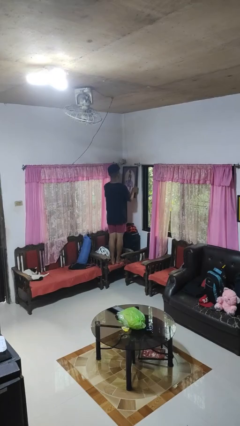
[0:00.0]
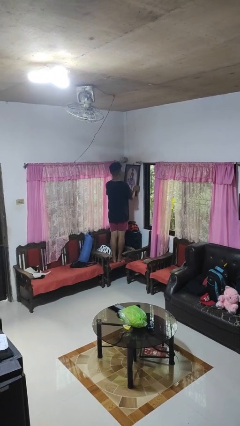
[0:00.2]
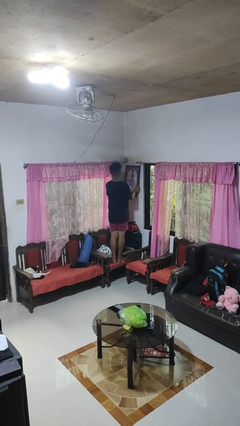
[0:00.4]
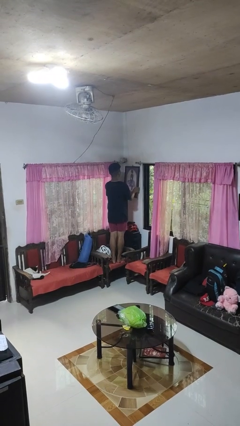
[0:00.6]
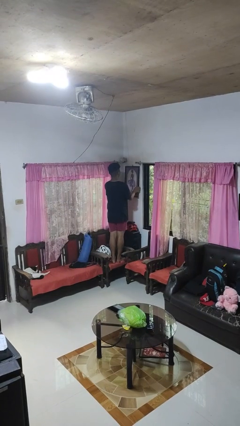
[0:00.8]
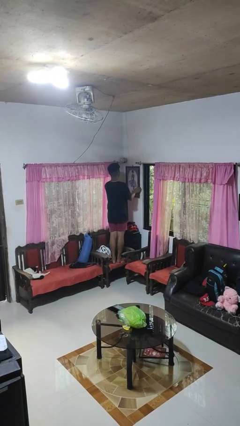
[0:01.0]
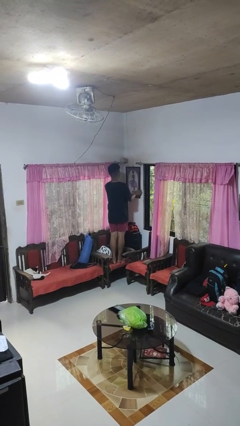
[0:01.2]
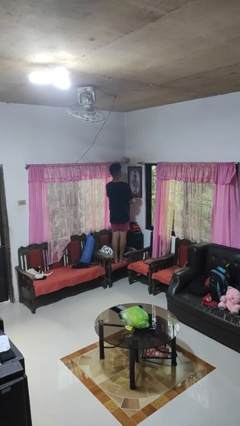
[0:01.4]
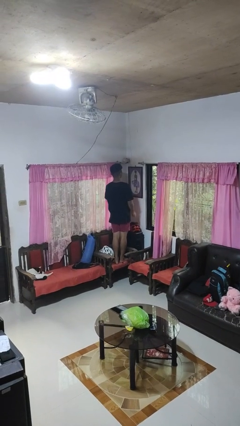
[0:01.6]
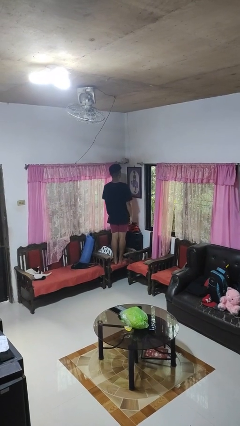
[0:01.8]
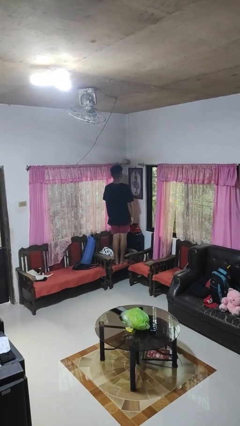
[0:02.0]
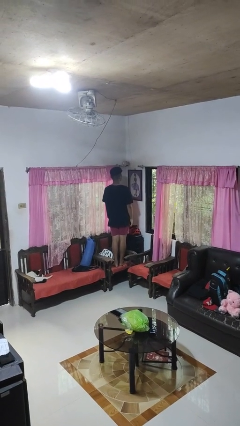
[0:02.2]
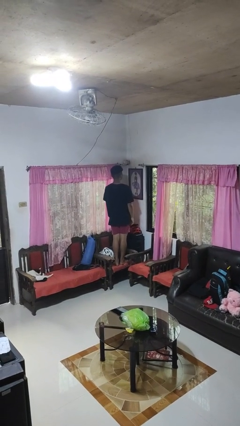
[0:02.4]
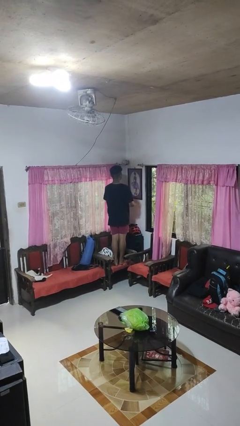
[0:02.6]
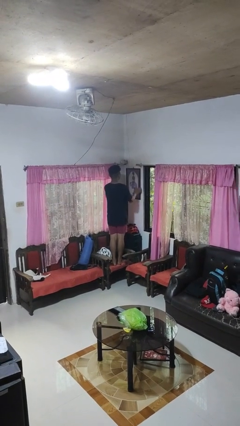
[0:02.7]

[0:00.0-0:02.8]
person puts up picture frame

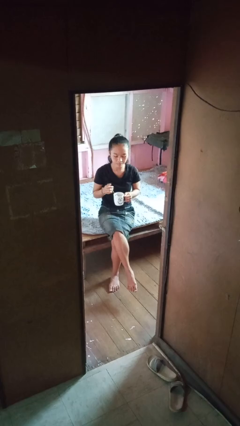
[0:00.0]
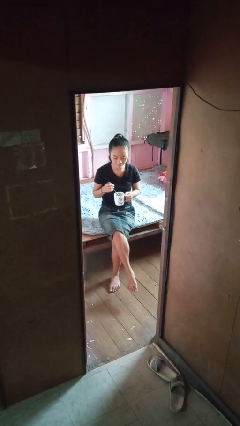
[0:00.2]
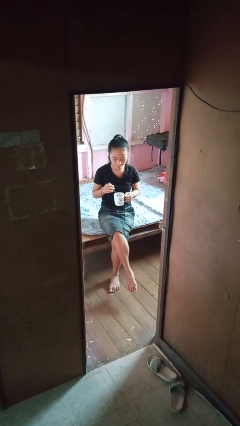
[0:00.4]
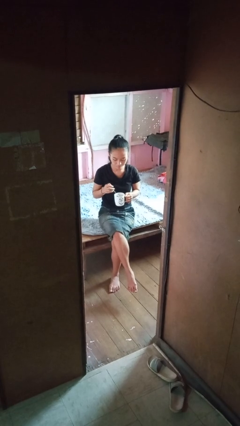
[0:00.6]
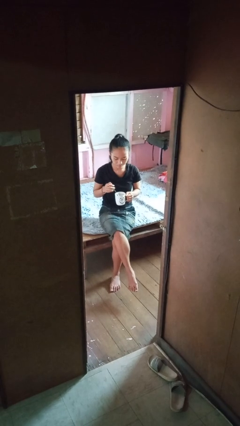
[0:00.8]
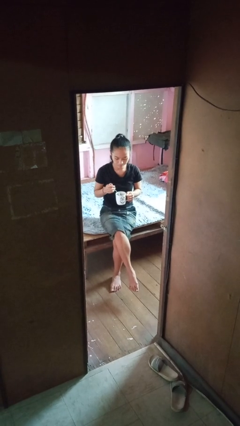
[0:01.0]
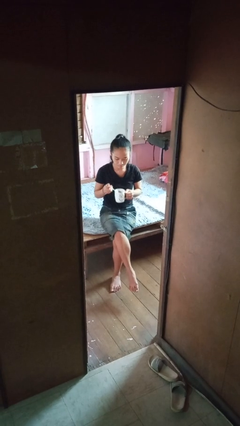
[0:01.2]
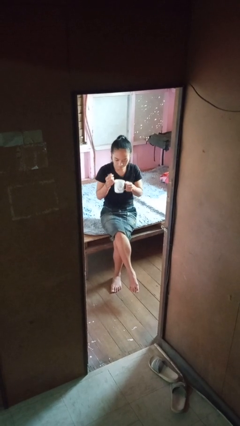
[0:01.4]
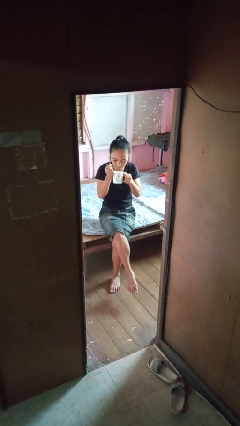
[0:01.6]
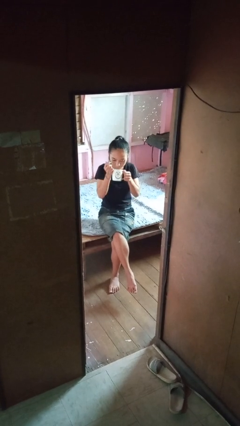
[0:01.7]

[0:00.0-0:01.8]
person stirs mug

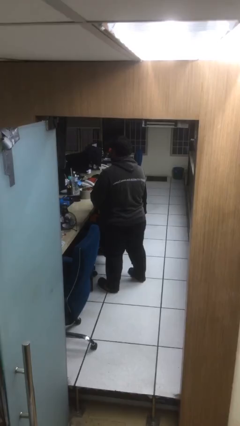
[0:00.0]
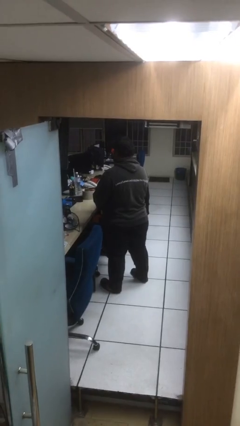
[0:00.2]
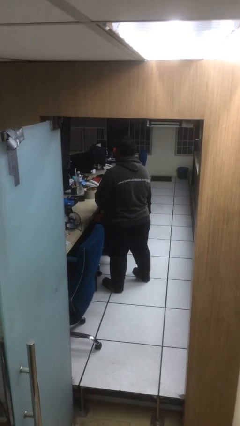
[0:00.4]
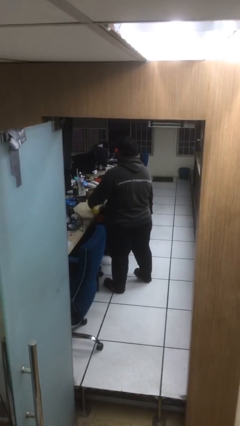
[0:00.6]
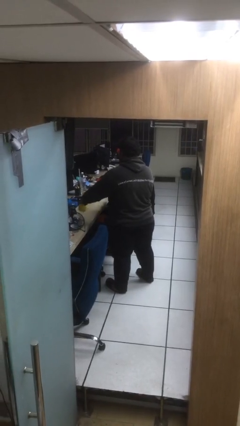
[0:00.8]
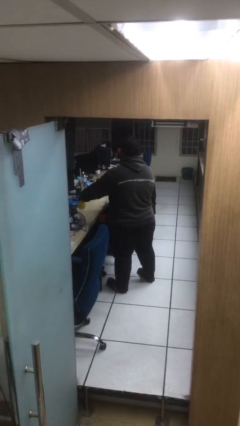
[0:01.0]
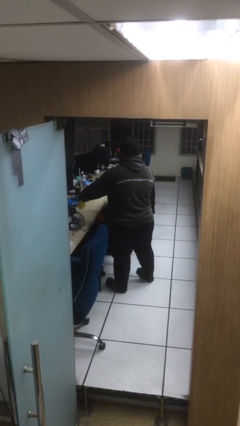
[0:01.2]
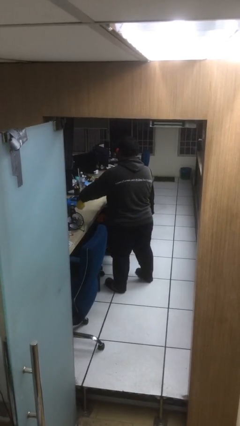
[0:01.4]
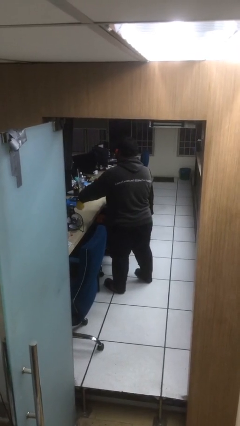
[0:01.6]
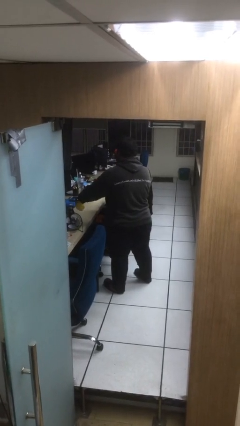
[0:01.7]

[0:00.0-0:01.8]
person sprays from bottle

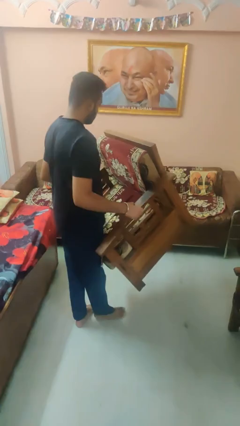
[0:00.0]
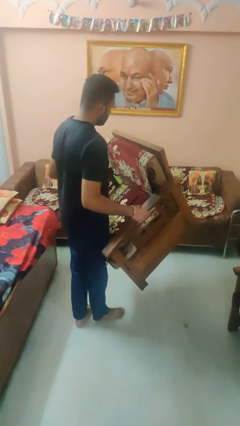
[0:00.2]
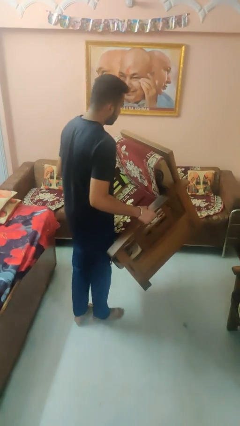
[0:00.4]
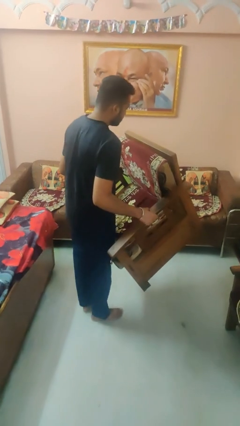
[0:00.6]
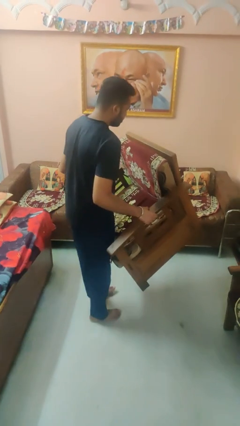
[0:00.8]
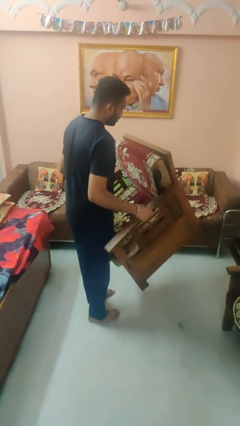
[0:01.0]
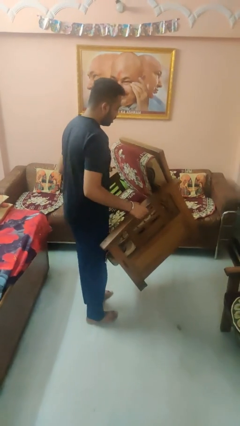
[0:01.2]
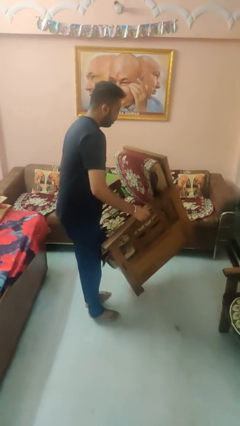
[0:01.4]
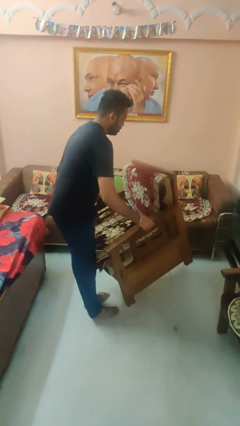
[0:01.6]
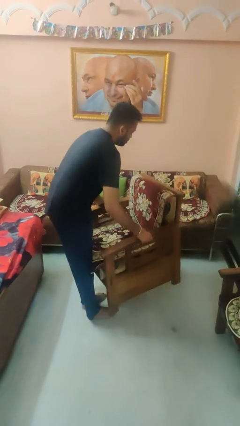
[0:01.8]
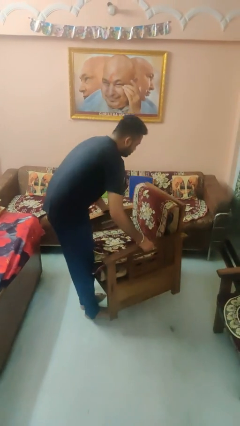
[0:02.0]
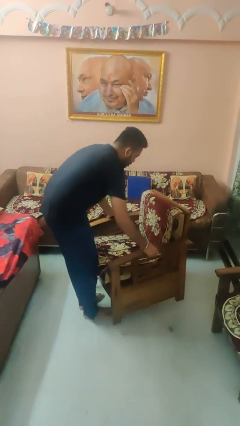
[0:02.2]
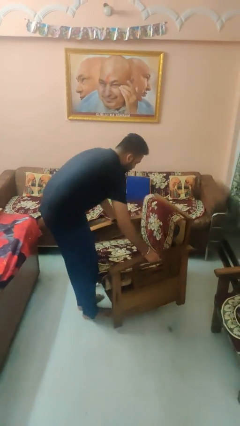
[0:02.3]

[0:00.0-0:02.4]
person carries furniture

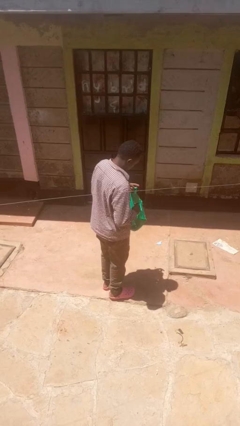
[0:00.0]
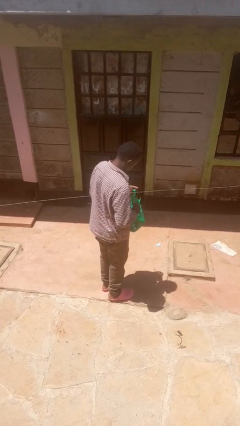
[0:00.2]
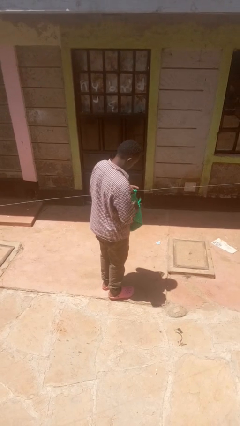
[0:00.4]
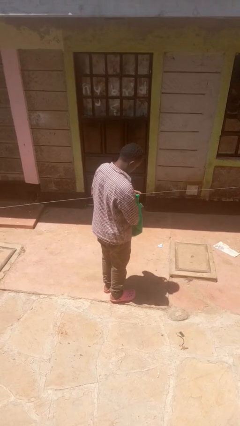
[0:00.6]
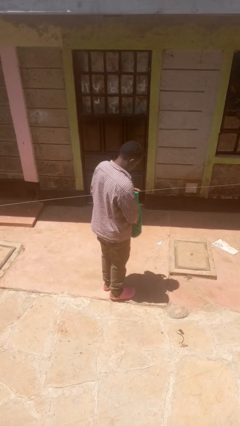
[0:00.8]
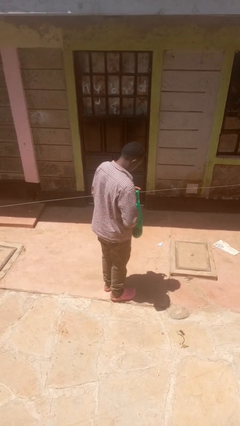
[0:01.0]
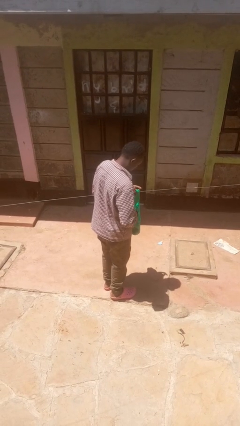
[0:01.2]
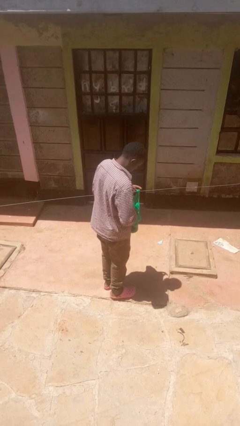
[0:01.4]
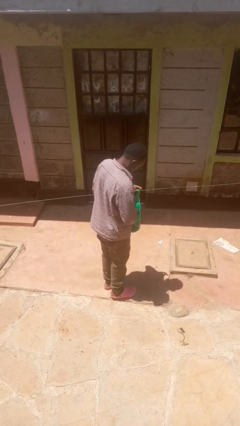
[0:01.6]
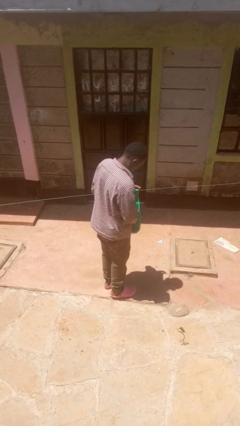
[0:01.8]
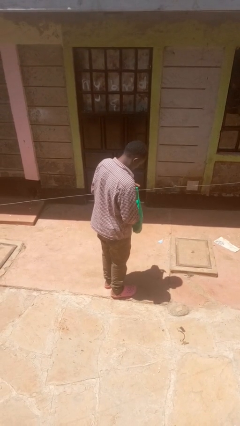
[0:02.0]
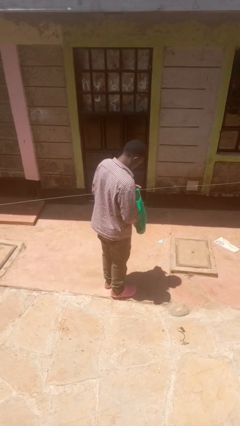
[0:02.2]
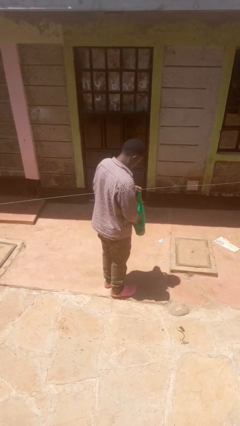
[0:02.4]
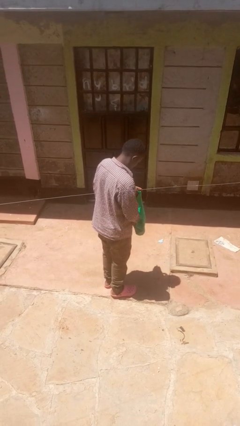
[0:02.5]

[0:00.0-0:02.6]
person puts object into bag

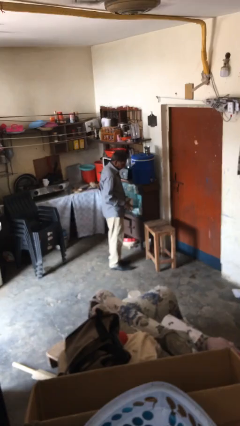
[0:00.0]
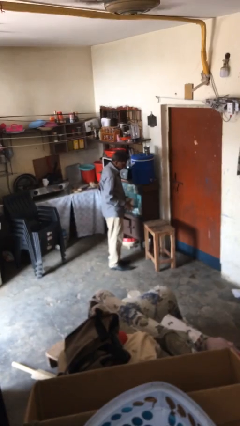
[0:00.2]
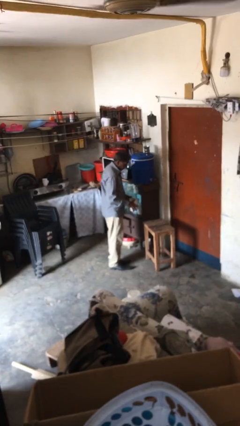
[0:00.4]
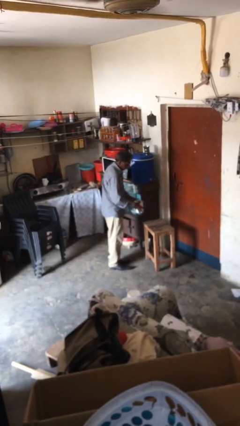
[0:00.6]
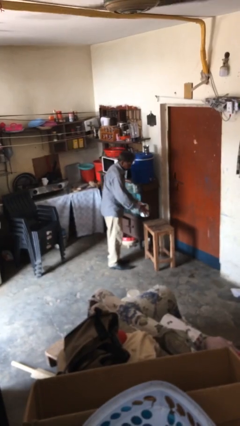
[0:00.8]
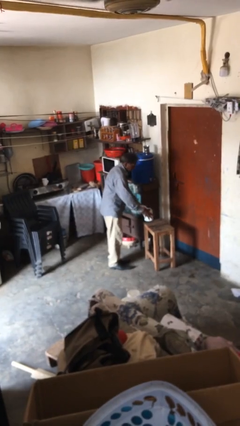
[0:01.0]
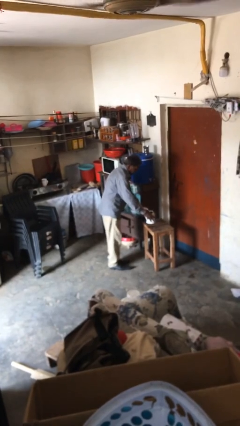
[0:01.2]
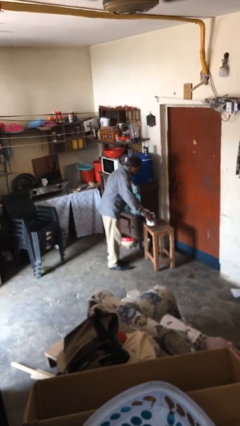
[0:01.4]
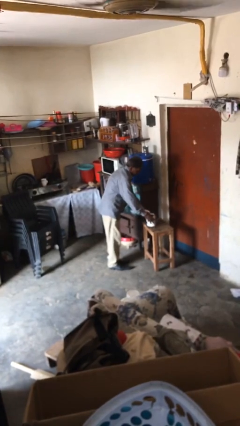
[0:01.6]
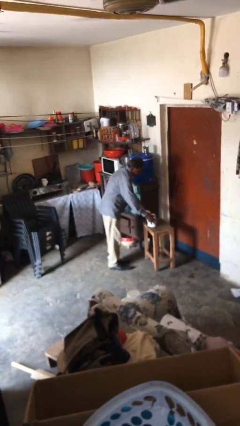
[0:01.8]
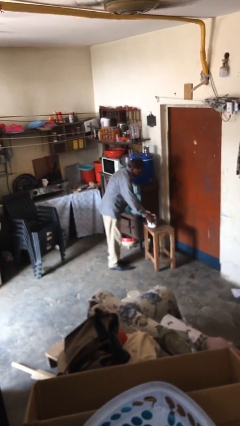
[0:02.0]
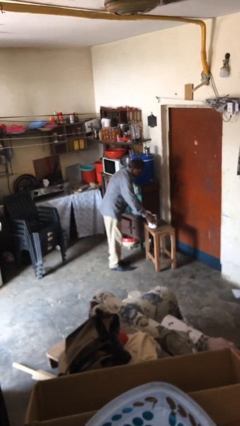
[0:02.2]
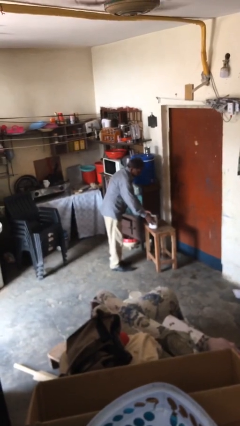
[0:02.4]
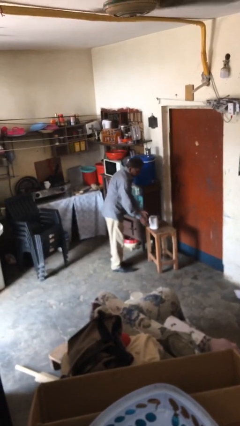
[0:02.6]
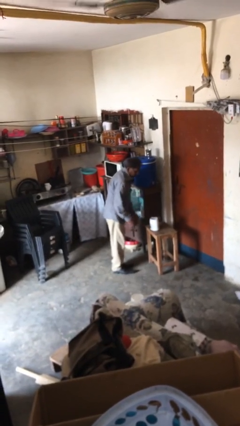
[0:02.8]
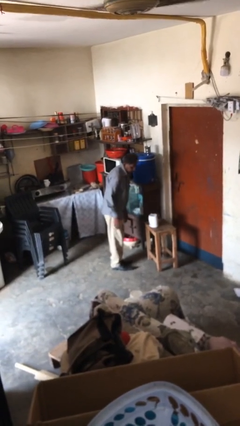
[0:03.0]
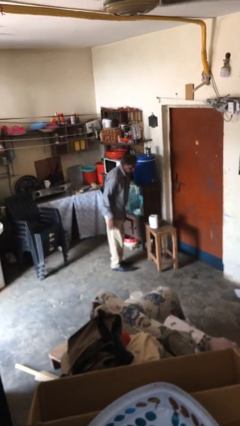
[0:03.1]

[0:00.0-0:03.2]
person puts down object on table

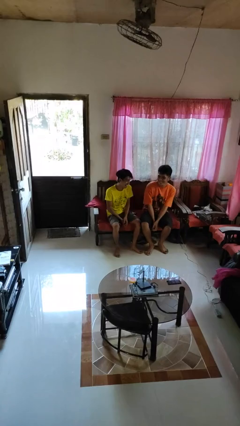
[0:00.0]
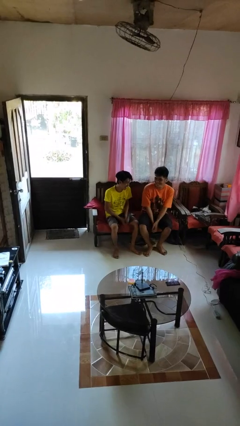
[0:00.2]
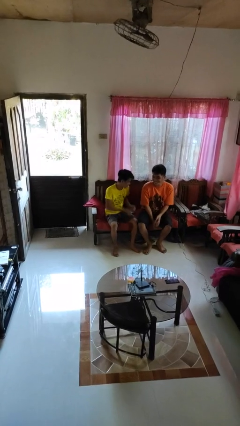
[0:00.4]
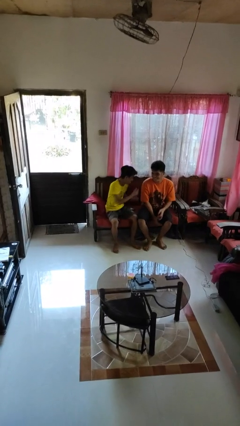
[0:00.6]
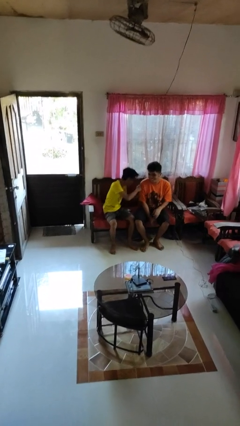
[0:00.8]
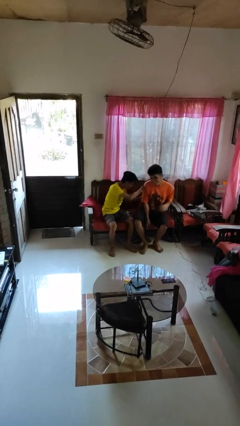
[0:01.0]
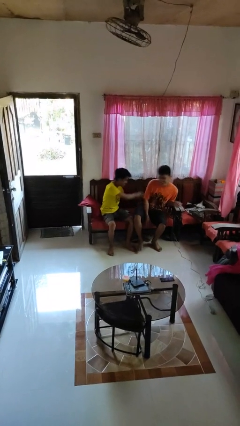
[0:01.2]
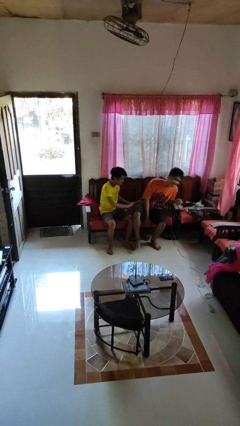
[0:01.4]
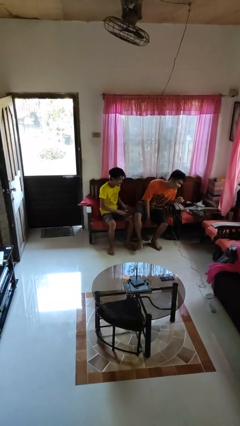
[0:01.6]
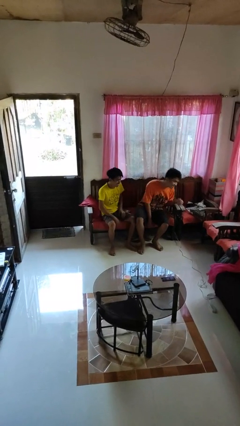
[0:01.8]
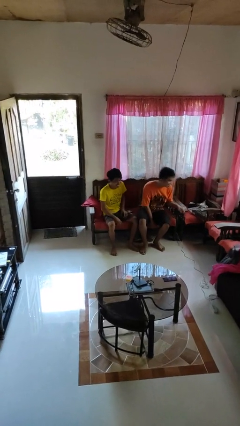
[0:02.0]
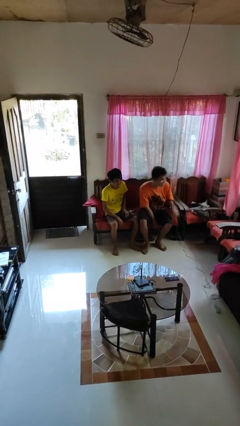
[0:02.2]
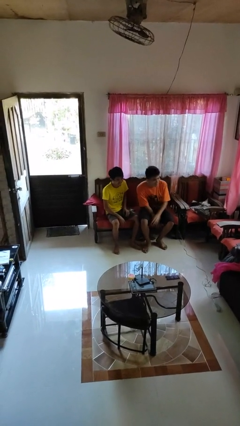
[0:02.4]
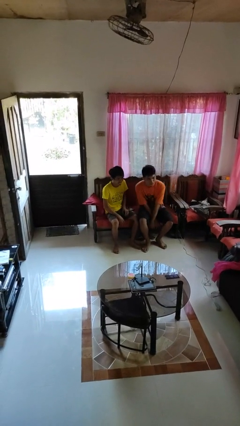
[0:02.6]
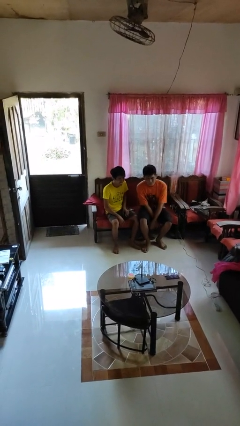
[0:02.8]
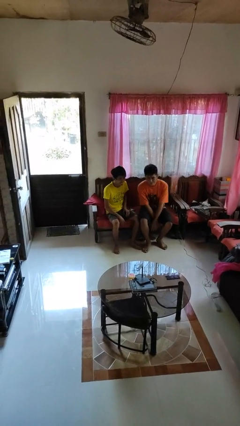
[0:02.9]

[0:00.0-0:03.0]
person shoves person
